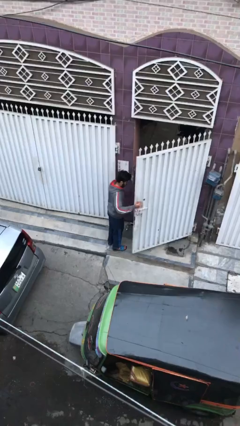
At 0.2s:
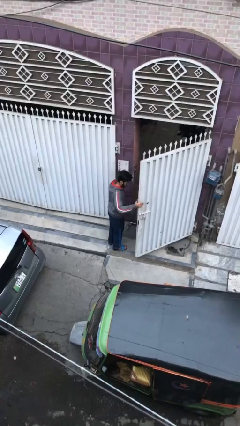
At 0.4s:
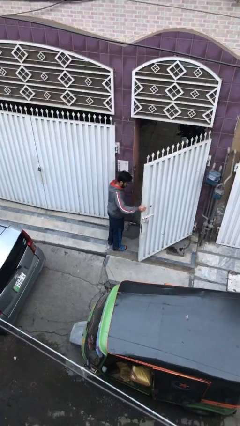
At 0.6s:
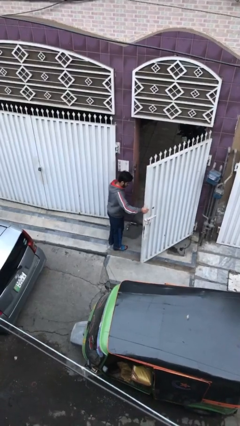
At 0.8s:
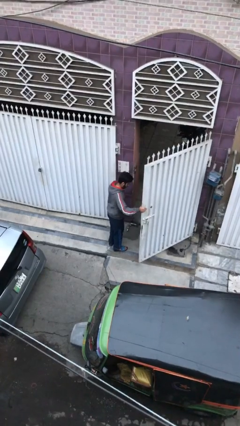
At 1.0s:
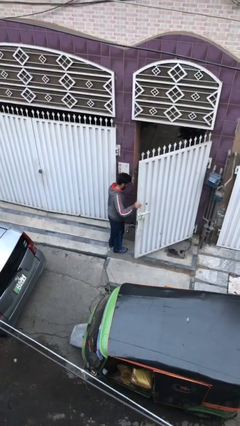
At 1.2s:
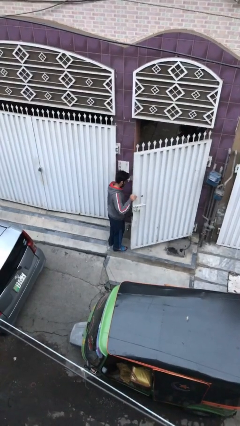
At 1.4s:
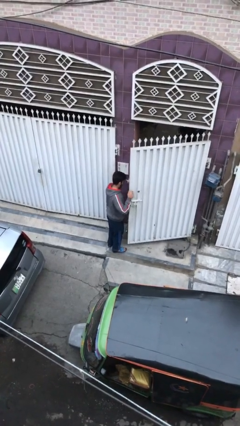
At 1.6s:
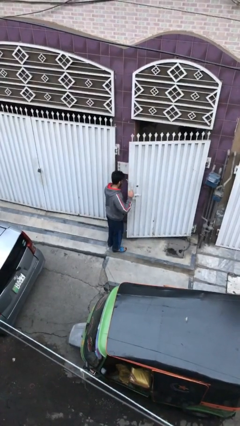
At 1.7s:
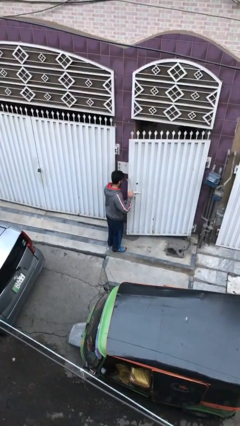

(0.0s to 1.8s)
person closes facility door

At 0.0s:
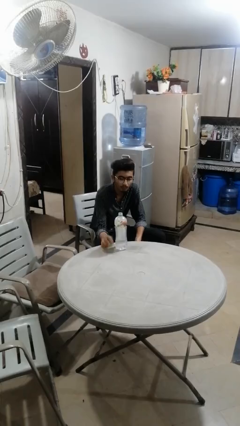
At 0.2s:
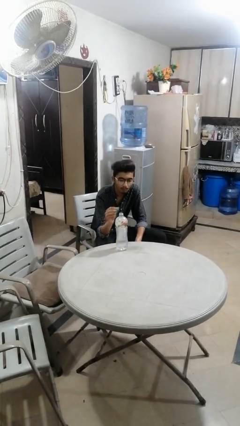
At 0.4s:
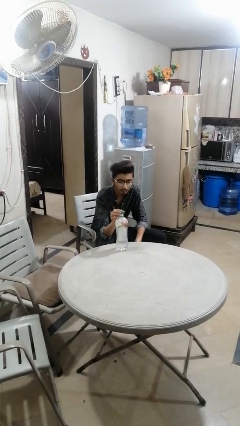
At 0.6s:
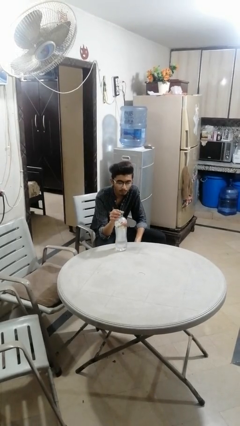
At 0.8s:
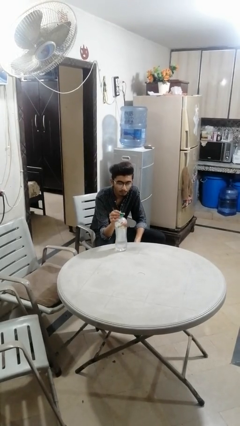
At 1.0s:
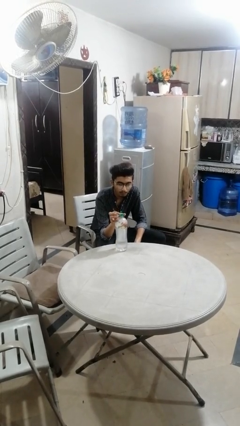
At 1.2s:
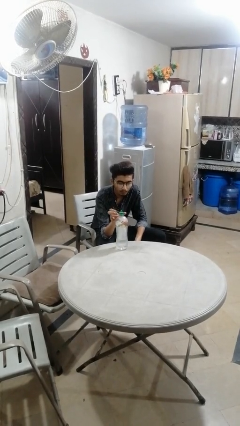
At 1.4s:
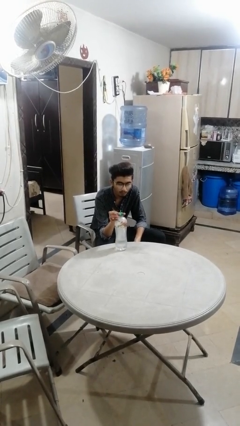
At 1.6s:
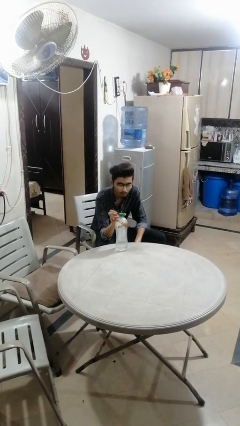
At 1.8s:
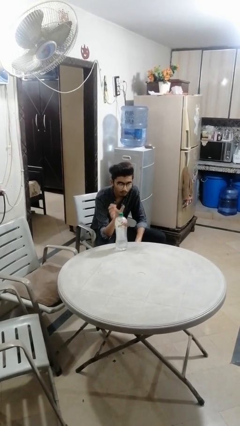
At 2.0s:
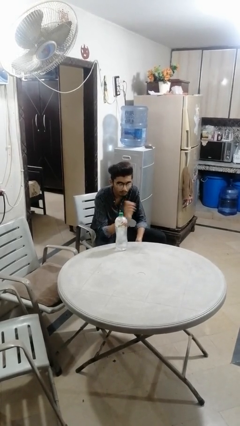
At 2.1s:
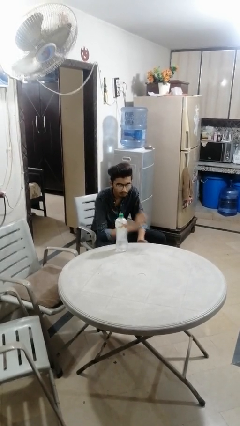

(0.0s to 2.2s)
person screws lid to bottle

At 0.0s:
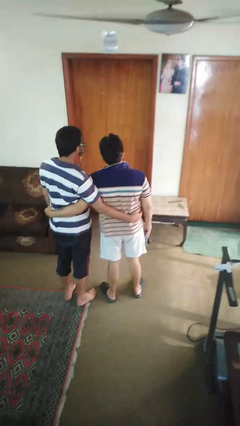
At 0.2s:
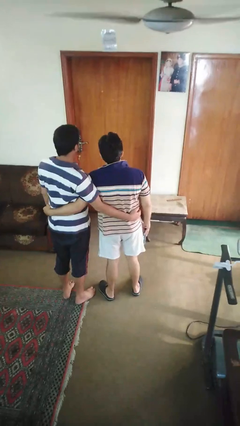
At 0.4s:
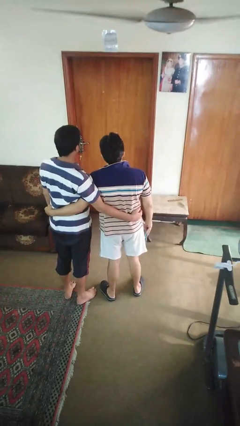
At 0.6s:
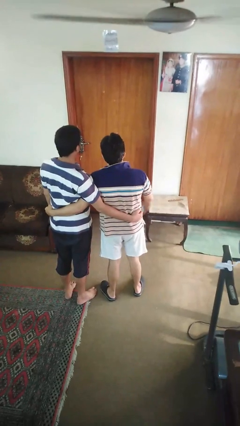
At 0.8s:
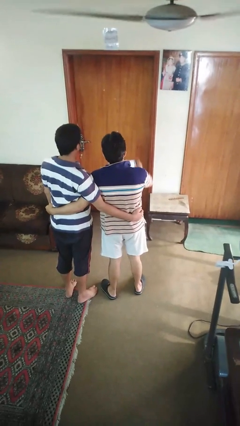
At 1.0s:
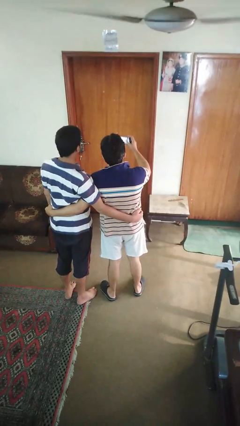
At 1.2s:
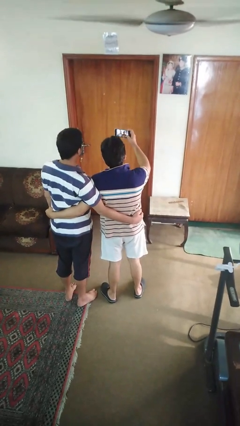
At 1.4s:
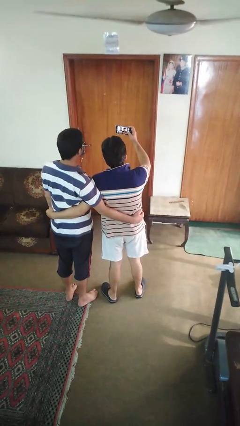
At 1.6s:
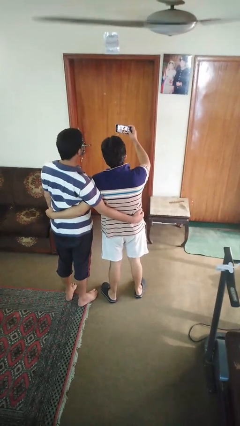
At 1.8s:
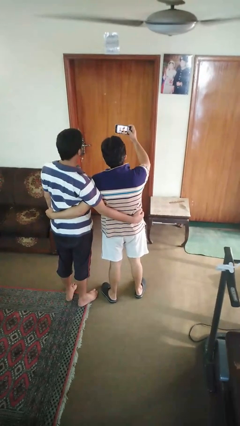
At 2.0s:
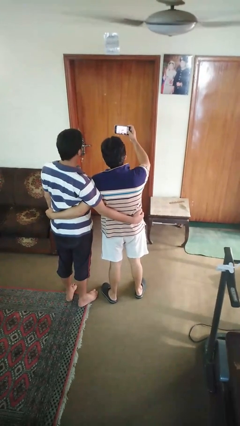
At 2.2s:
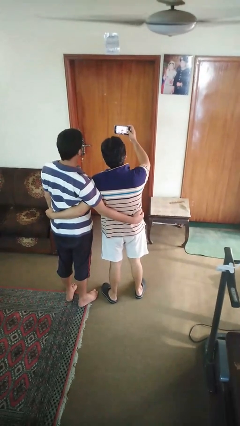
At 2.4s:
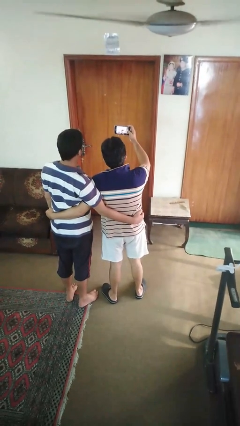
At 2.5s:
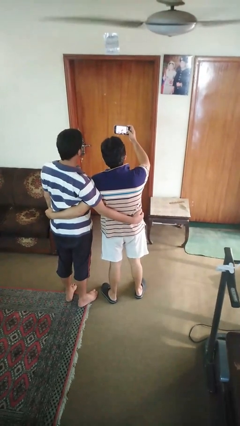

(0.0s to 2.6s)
person takes selfie with person

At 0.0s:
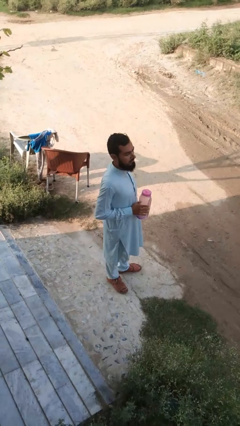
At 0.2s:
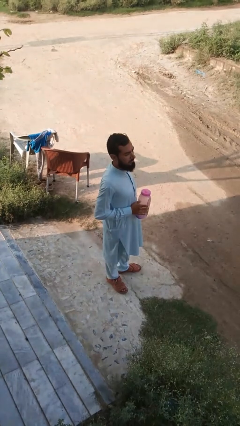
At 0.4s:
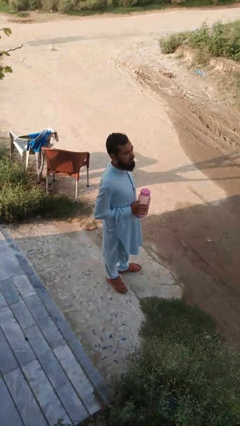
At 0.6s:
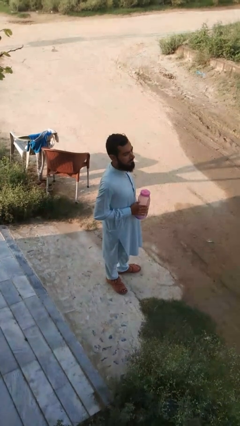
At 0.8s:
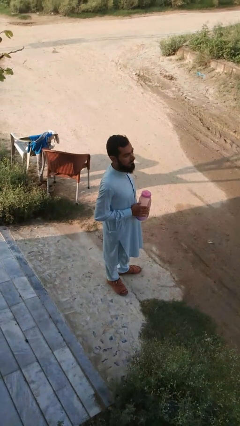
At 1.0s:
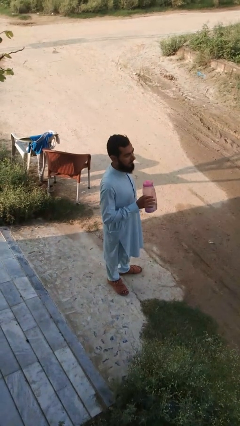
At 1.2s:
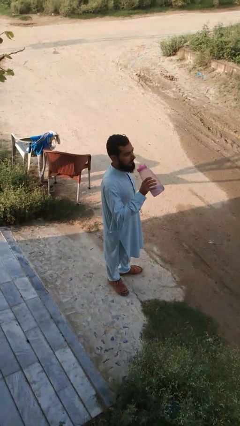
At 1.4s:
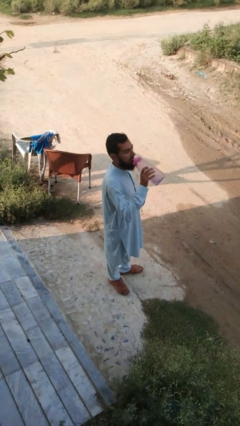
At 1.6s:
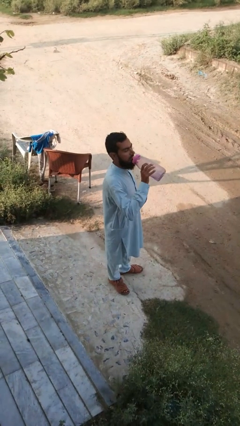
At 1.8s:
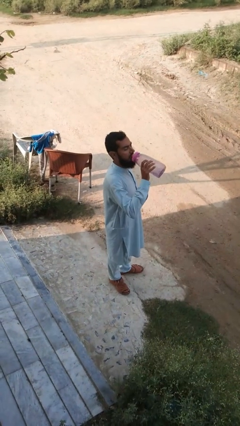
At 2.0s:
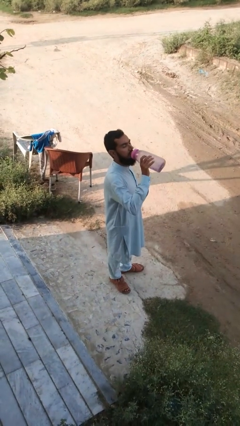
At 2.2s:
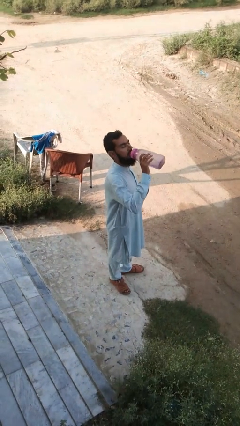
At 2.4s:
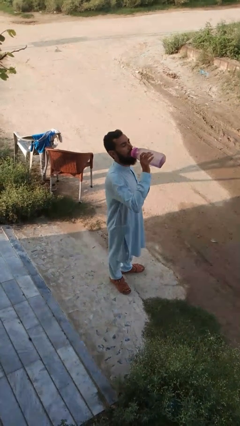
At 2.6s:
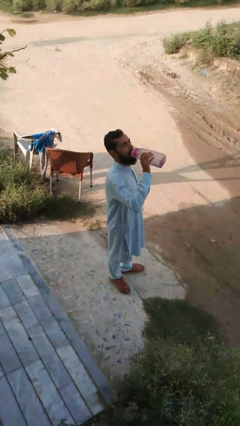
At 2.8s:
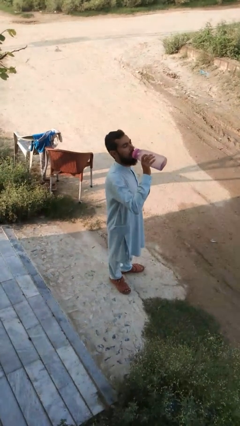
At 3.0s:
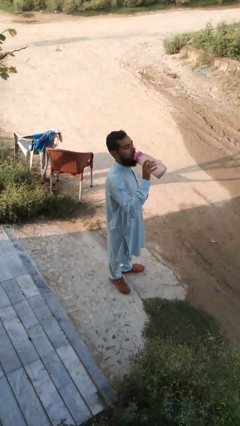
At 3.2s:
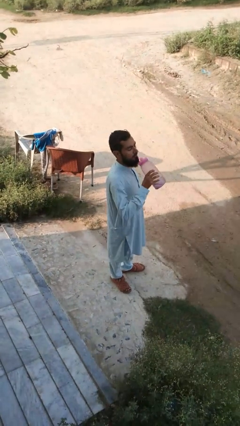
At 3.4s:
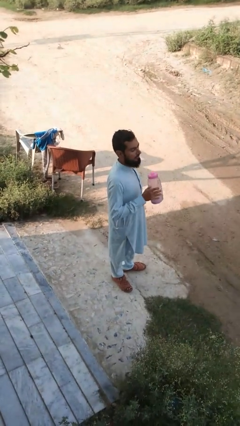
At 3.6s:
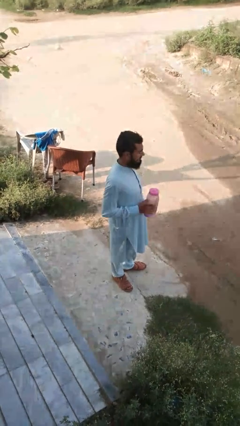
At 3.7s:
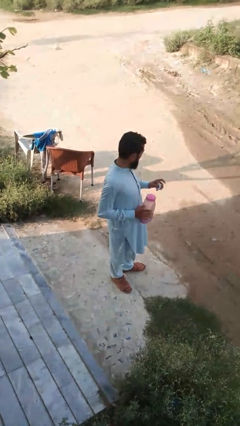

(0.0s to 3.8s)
person drinks from bottle

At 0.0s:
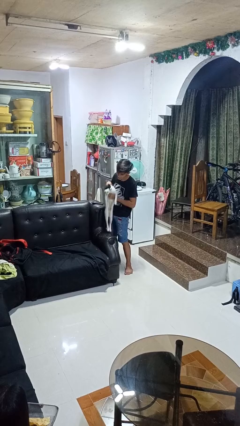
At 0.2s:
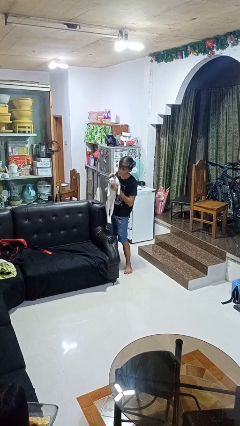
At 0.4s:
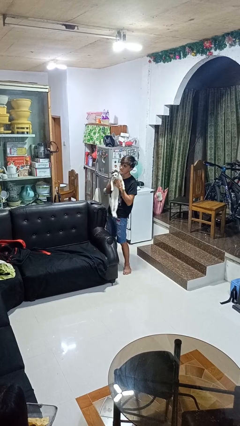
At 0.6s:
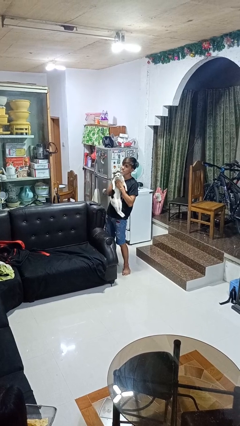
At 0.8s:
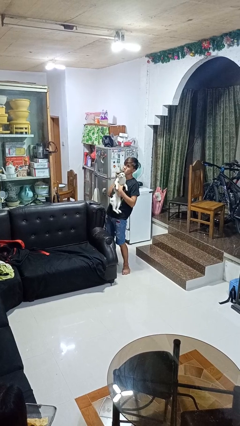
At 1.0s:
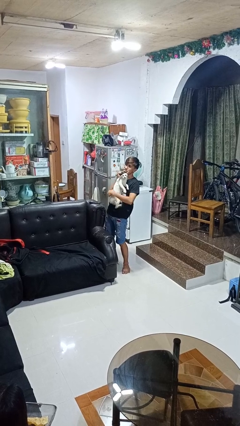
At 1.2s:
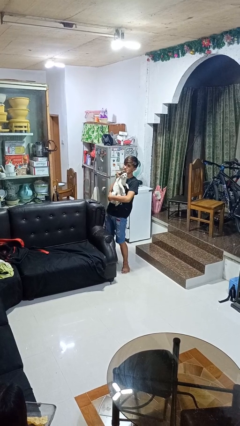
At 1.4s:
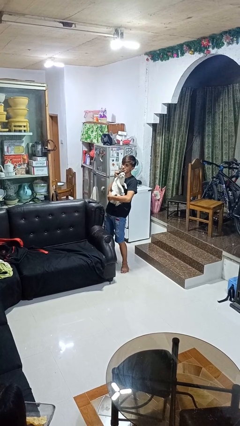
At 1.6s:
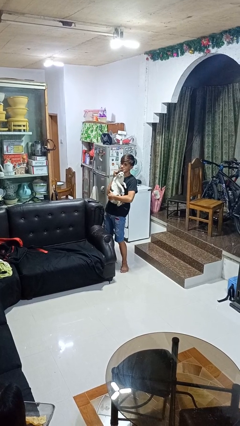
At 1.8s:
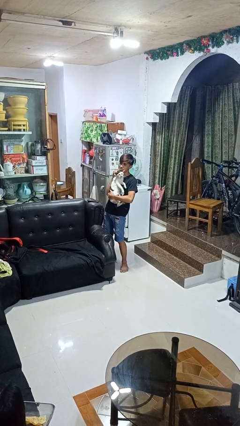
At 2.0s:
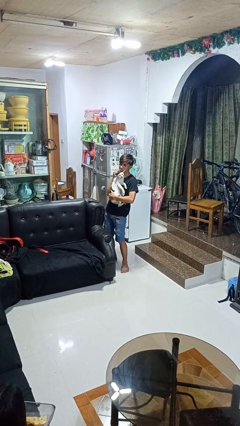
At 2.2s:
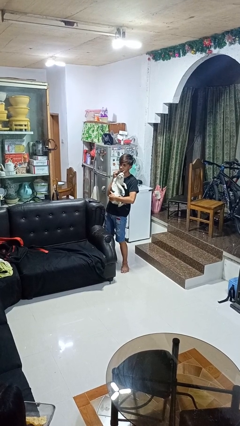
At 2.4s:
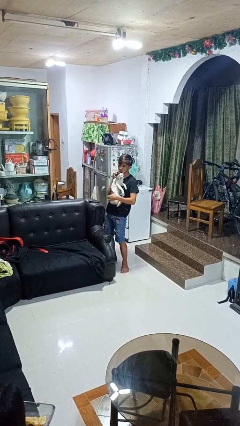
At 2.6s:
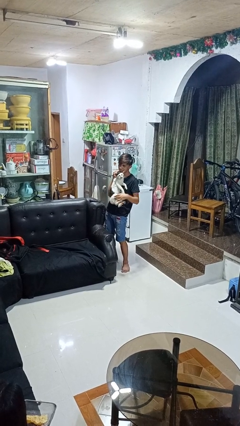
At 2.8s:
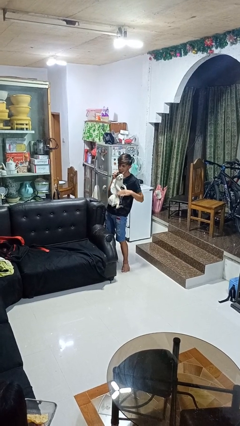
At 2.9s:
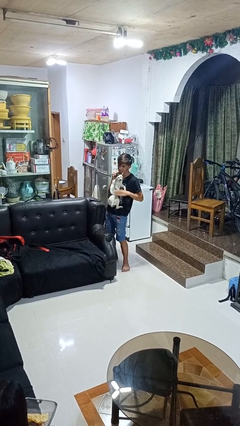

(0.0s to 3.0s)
person hugs cat

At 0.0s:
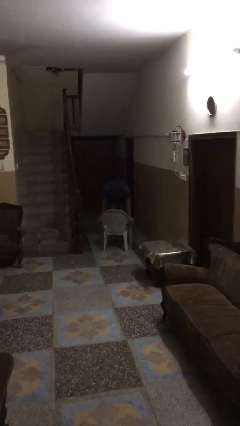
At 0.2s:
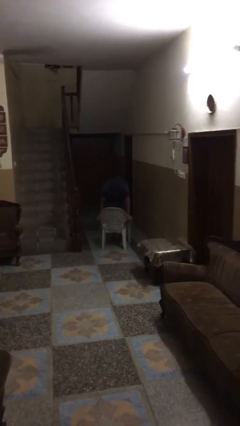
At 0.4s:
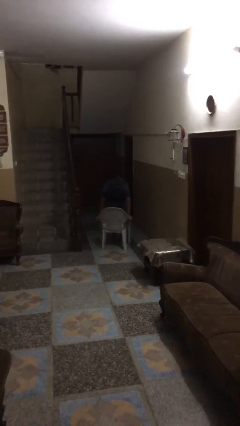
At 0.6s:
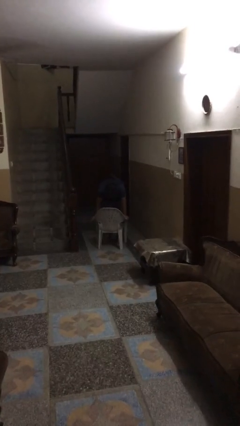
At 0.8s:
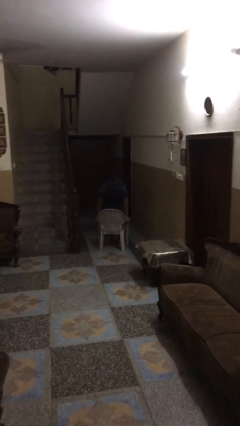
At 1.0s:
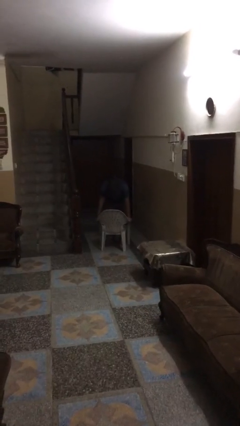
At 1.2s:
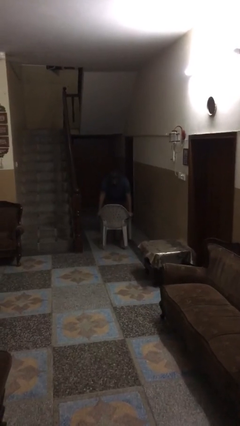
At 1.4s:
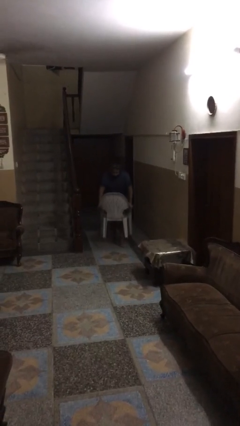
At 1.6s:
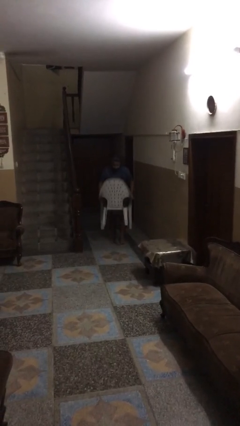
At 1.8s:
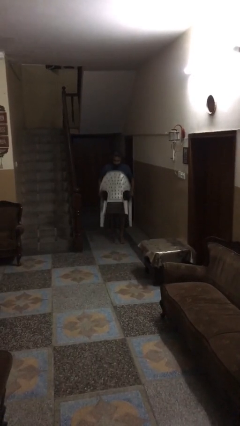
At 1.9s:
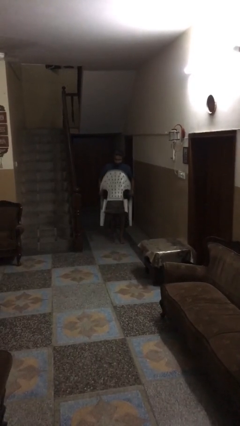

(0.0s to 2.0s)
person picks up object from floor

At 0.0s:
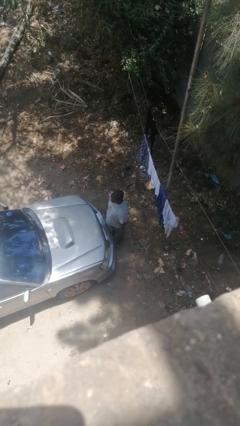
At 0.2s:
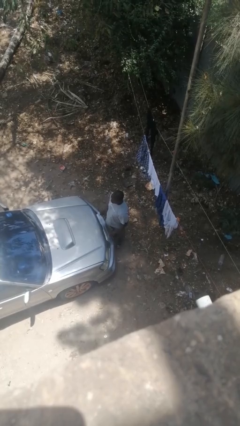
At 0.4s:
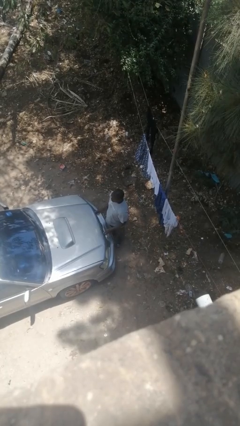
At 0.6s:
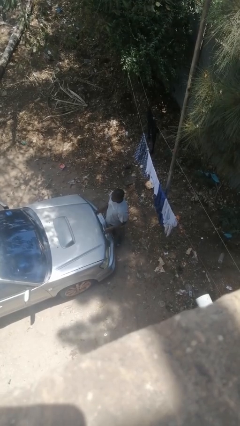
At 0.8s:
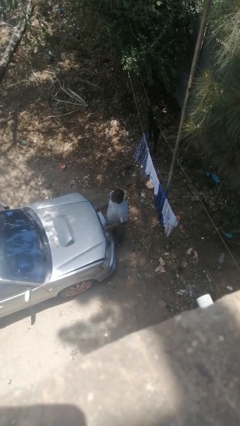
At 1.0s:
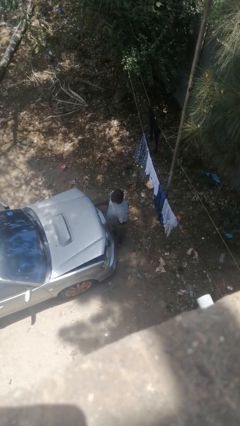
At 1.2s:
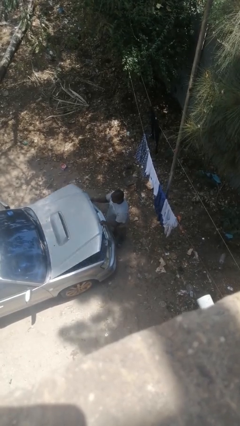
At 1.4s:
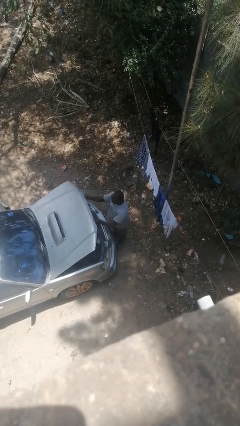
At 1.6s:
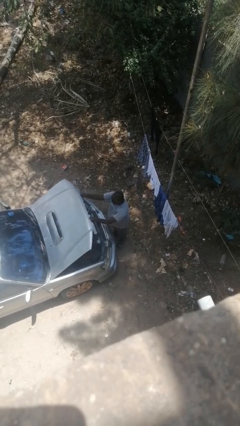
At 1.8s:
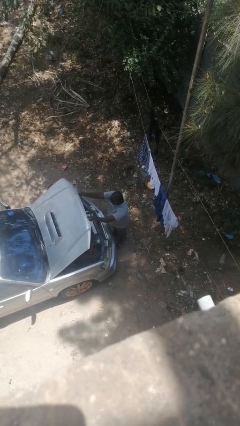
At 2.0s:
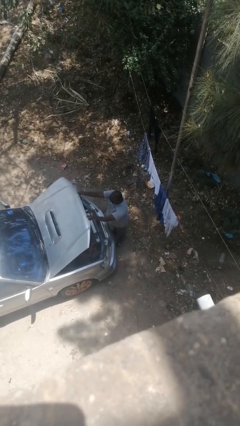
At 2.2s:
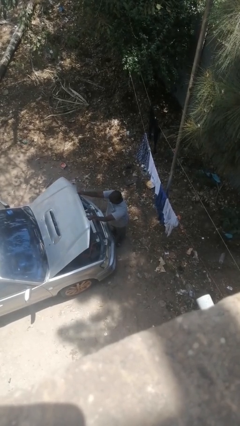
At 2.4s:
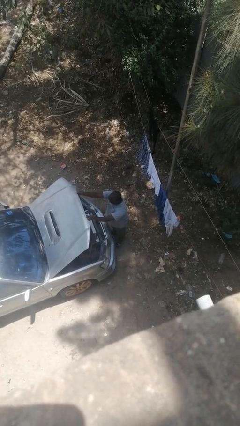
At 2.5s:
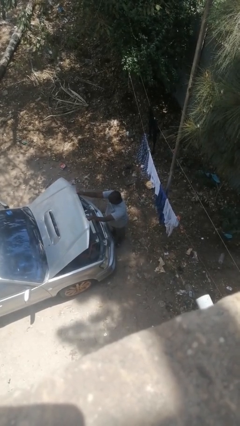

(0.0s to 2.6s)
person opens car hood
